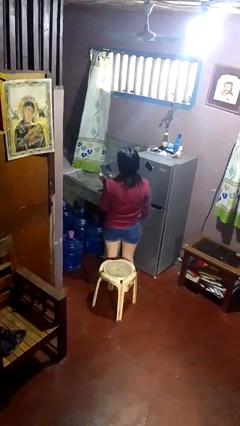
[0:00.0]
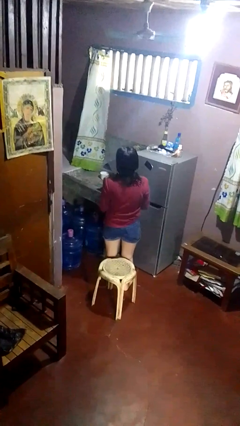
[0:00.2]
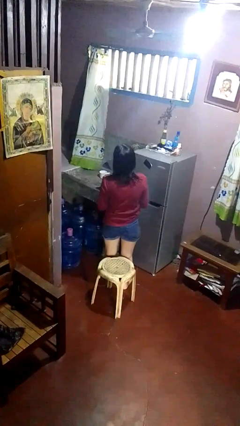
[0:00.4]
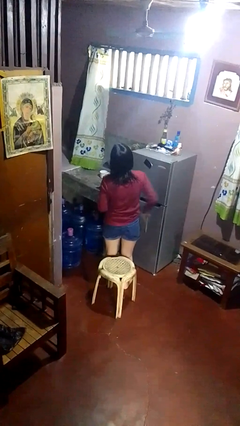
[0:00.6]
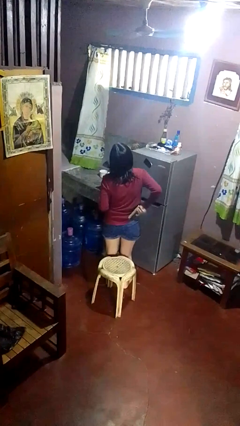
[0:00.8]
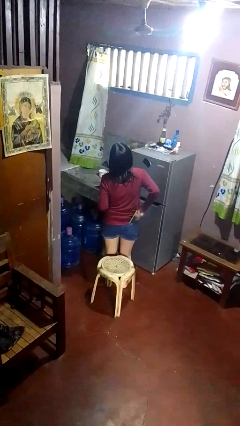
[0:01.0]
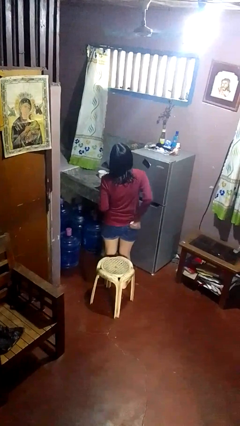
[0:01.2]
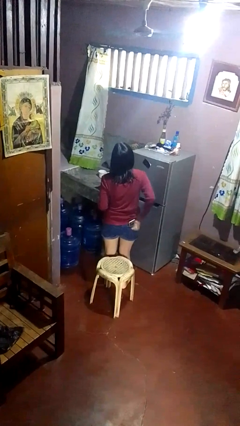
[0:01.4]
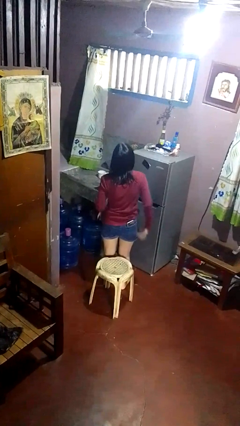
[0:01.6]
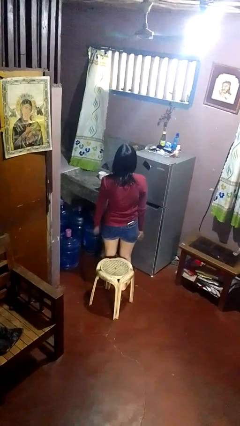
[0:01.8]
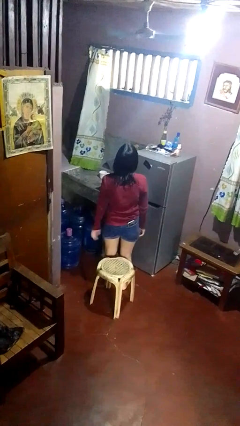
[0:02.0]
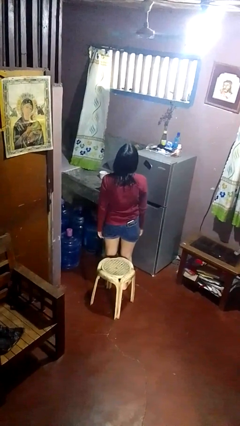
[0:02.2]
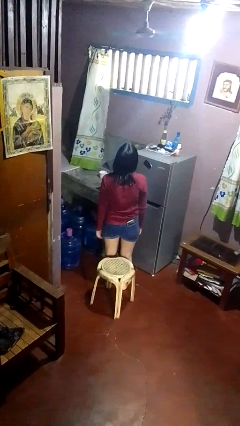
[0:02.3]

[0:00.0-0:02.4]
person puts phone into pocket

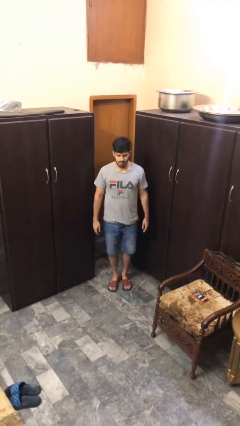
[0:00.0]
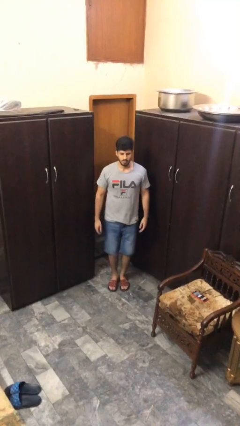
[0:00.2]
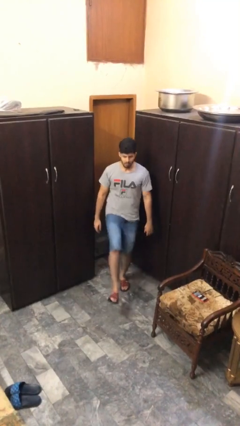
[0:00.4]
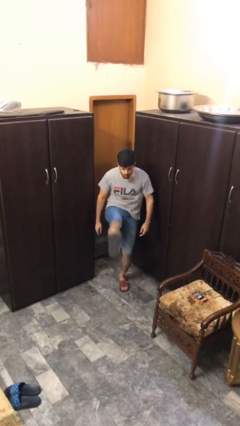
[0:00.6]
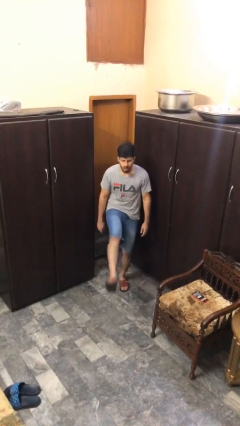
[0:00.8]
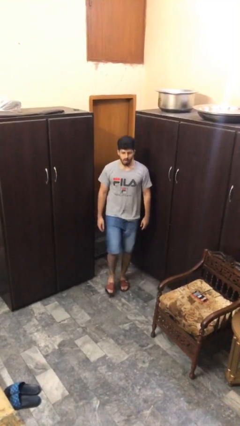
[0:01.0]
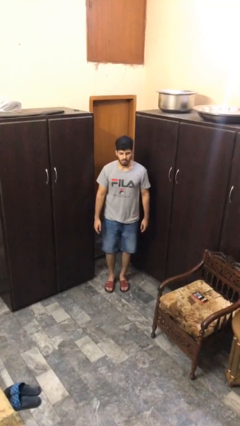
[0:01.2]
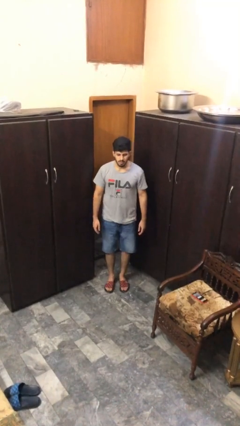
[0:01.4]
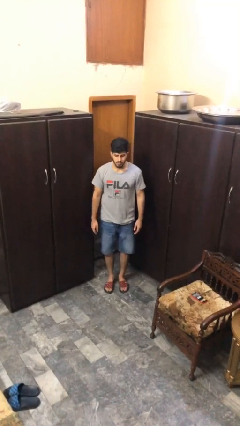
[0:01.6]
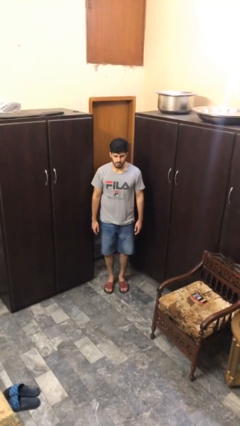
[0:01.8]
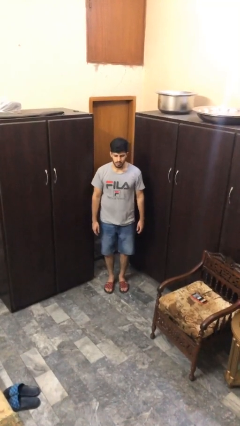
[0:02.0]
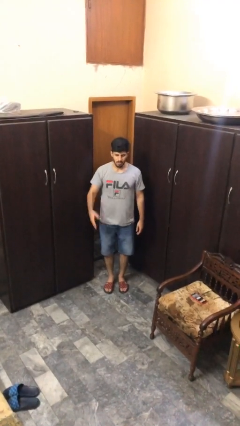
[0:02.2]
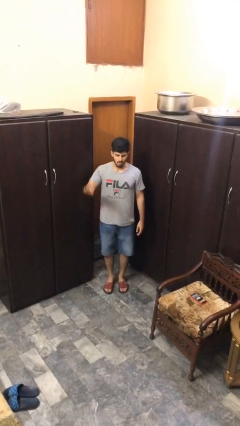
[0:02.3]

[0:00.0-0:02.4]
person karate kicks

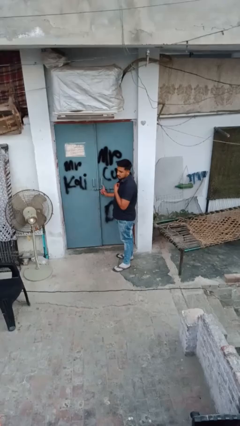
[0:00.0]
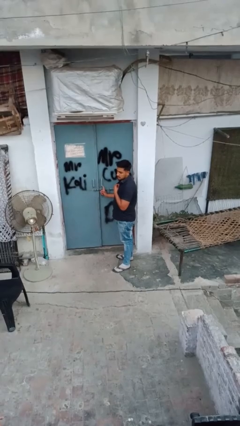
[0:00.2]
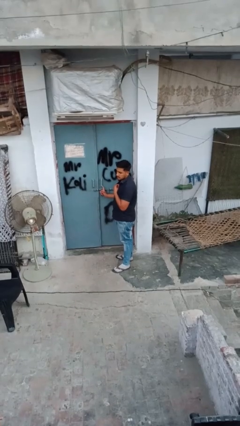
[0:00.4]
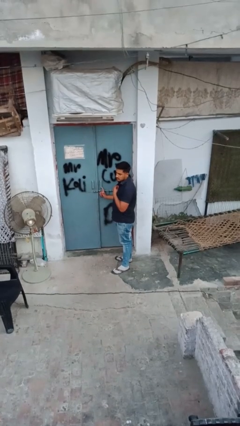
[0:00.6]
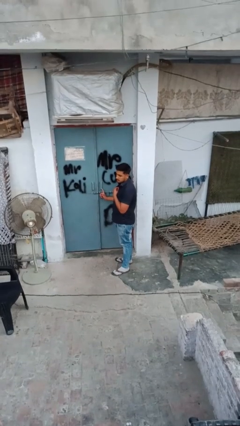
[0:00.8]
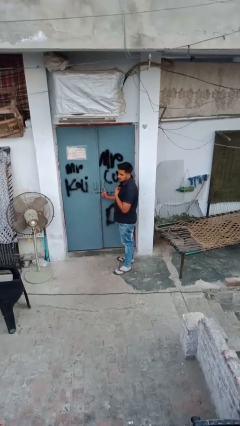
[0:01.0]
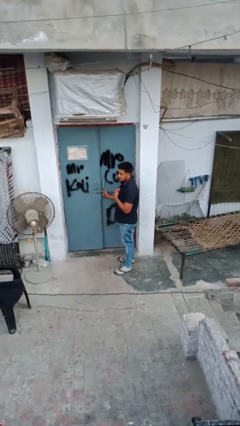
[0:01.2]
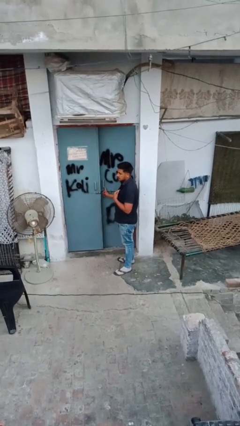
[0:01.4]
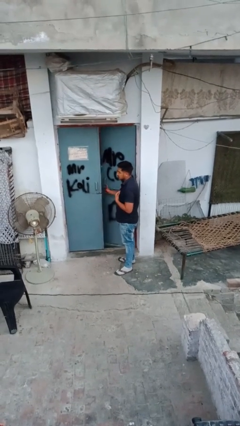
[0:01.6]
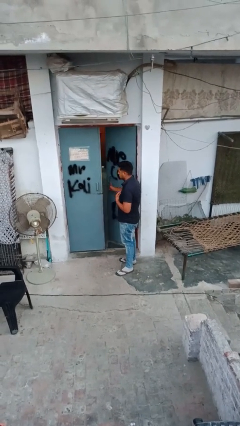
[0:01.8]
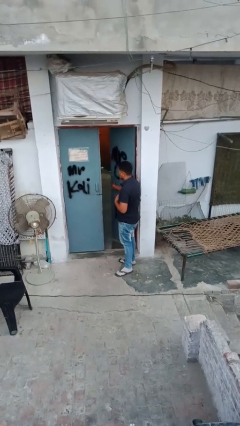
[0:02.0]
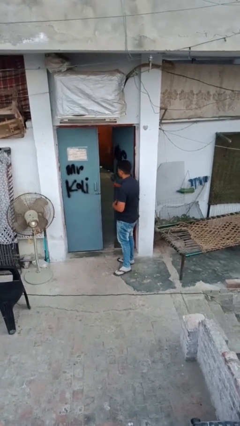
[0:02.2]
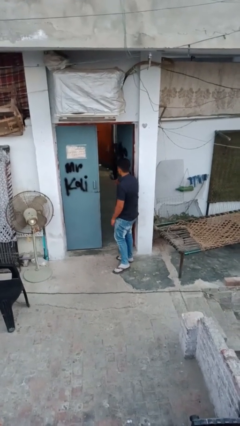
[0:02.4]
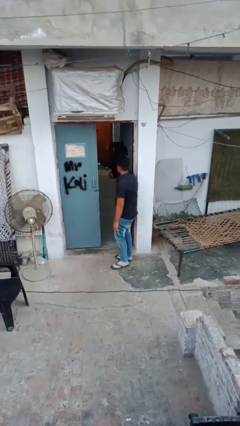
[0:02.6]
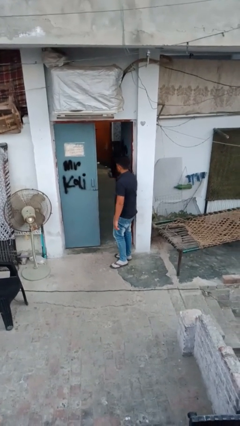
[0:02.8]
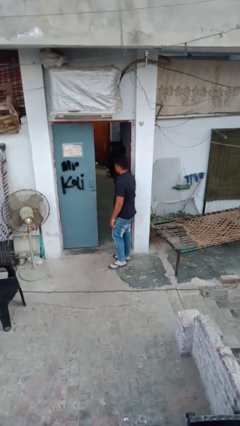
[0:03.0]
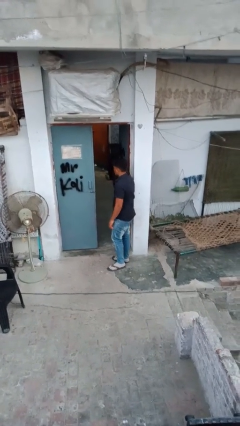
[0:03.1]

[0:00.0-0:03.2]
person opens facility door

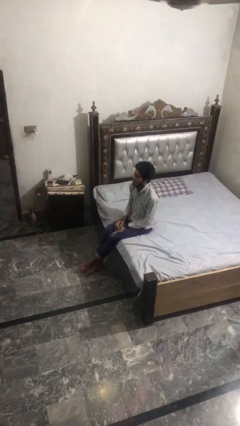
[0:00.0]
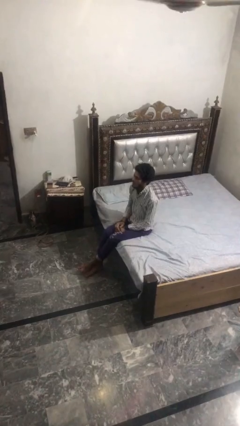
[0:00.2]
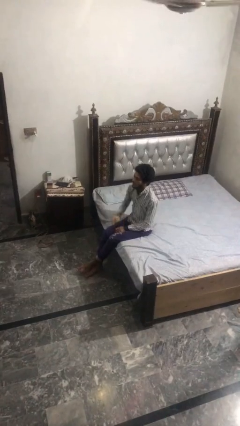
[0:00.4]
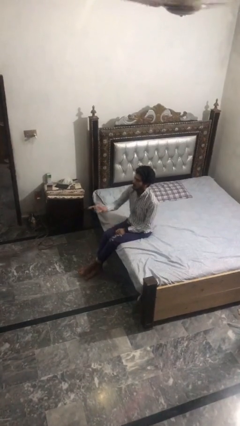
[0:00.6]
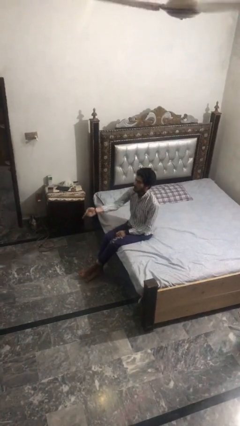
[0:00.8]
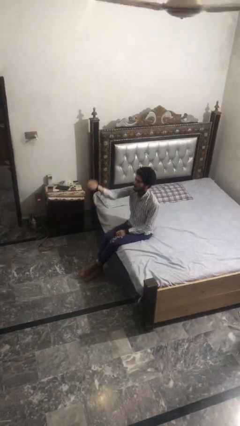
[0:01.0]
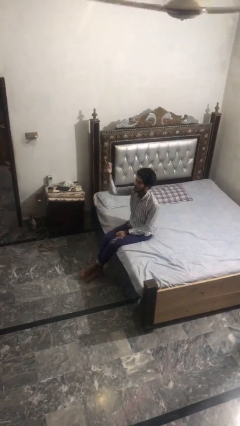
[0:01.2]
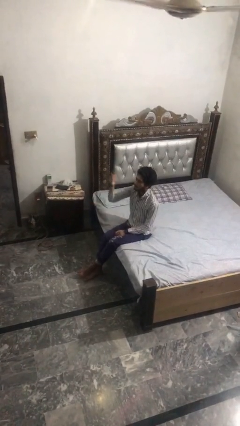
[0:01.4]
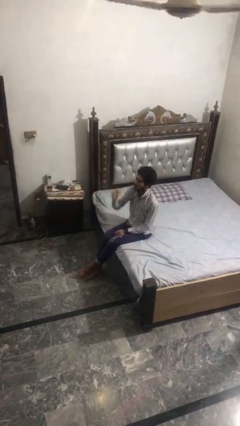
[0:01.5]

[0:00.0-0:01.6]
person gestures swipe up

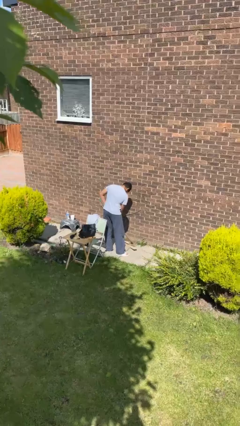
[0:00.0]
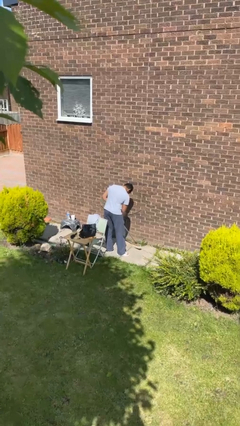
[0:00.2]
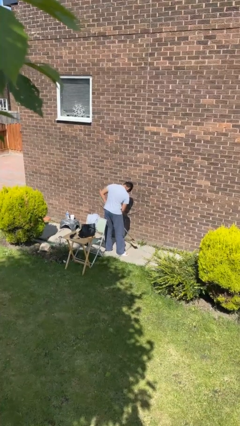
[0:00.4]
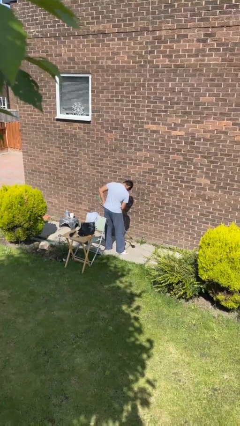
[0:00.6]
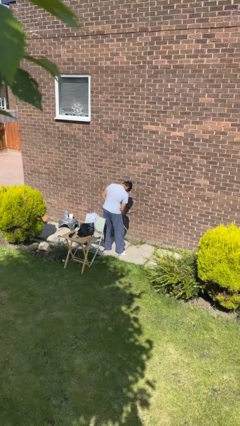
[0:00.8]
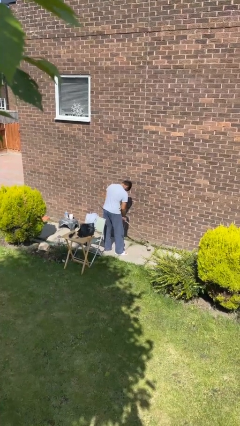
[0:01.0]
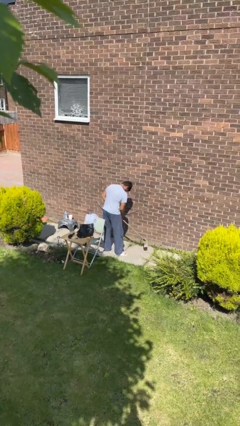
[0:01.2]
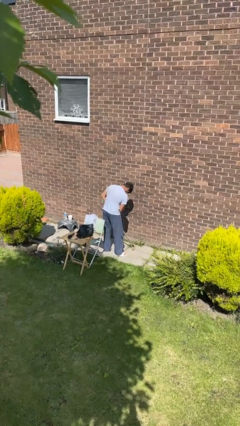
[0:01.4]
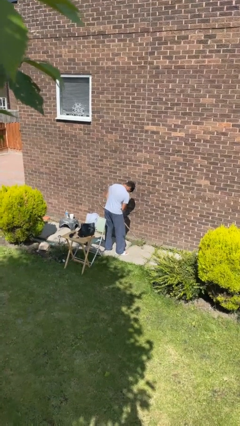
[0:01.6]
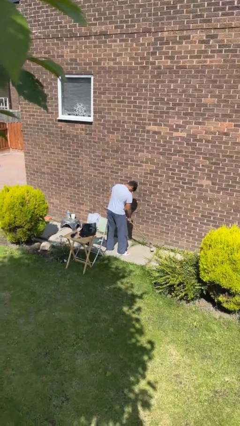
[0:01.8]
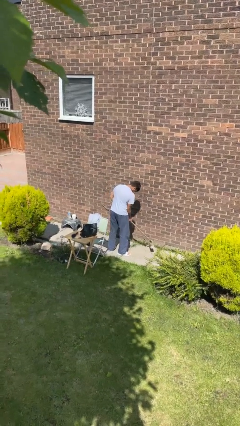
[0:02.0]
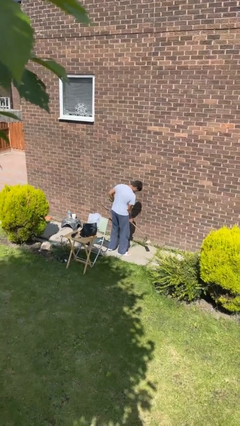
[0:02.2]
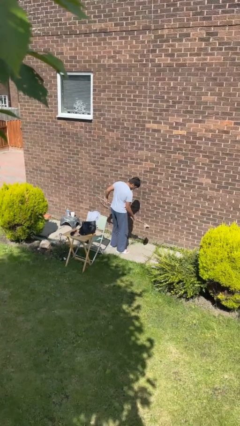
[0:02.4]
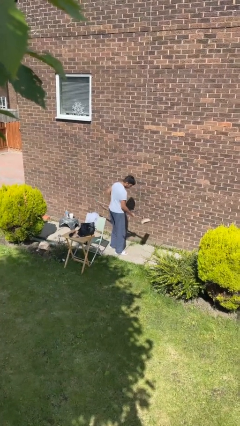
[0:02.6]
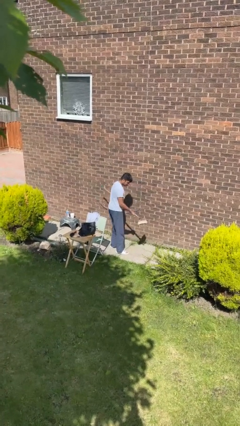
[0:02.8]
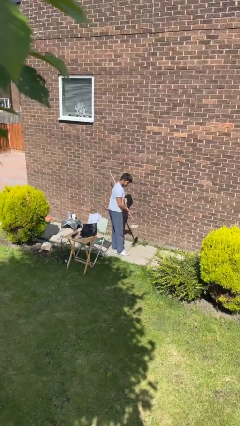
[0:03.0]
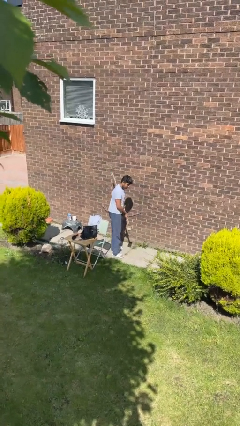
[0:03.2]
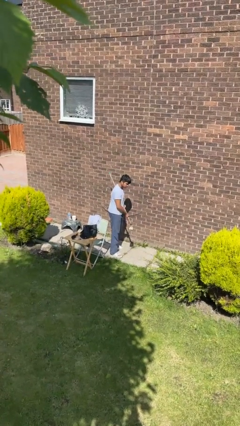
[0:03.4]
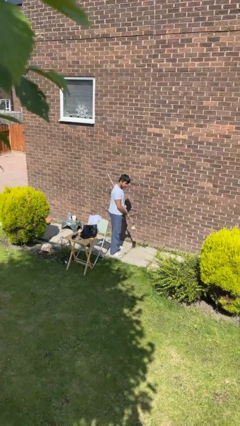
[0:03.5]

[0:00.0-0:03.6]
person sweeps floor

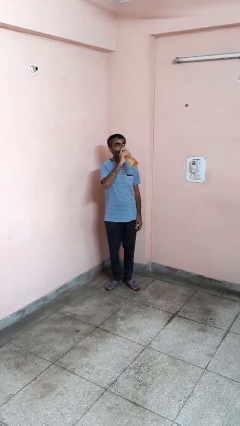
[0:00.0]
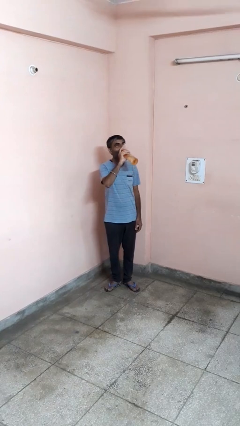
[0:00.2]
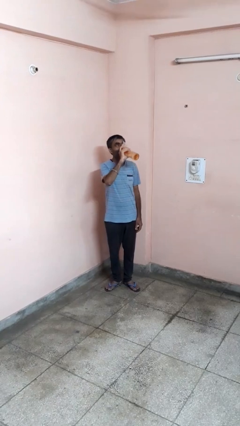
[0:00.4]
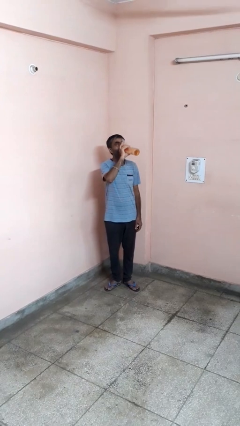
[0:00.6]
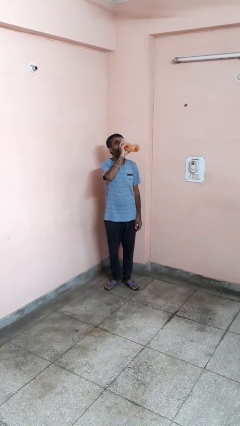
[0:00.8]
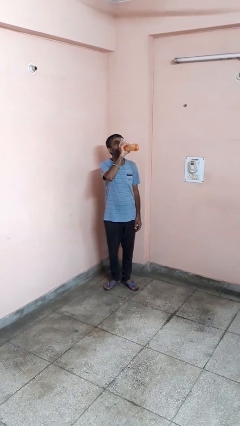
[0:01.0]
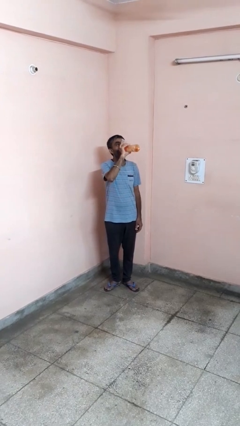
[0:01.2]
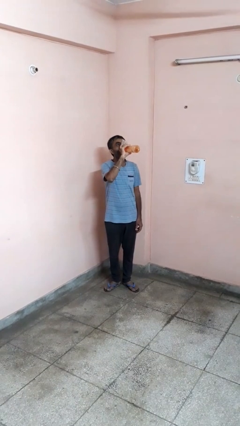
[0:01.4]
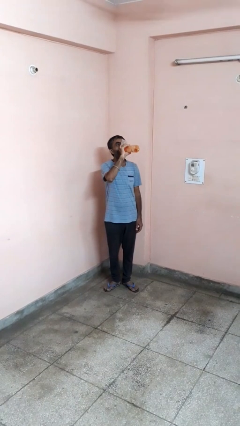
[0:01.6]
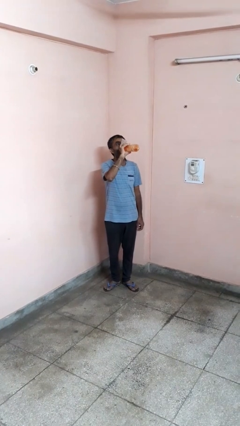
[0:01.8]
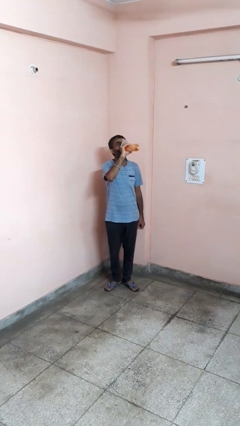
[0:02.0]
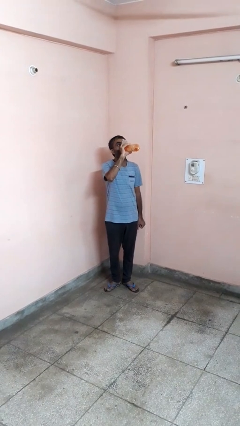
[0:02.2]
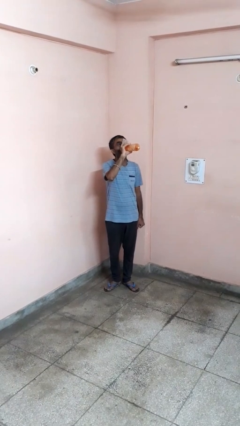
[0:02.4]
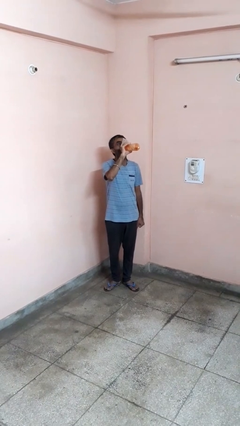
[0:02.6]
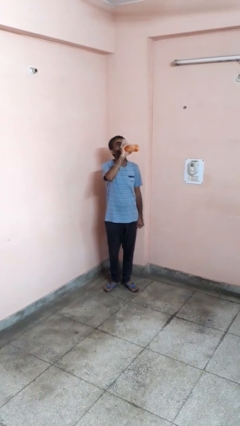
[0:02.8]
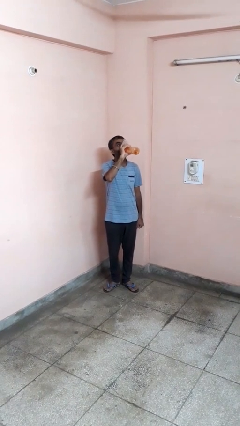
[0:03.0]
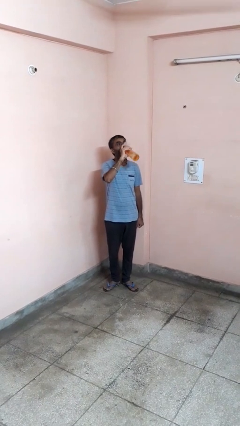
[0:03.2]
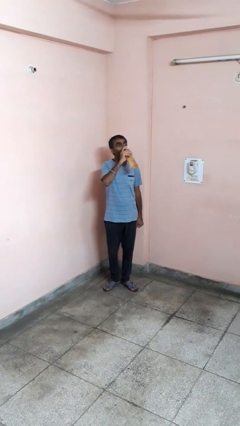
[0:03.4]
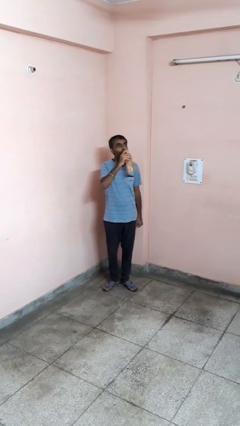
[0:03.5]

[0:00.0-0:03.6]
person drinks from bottle

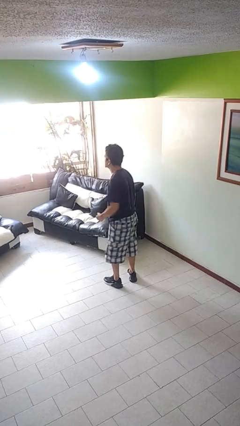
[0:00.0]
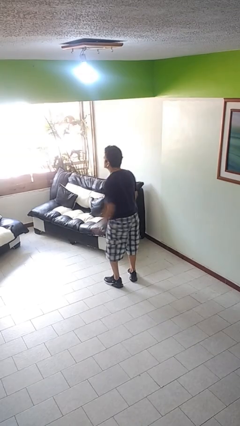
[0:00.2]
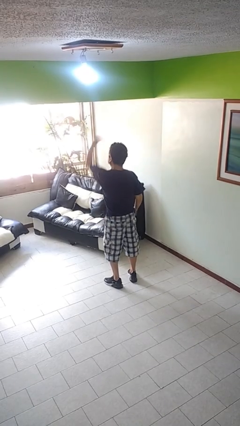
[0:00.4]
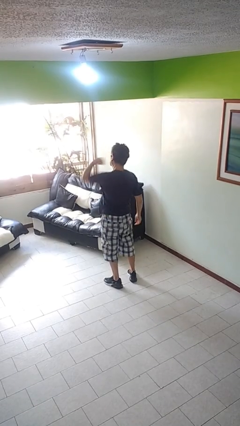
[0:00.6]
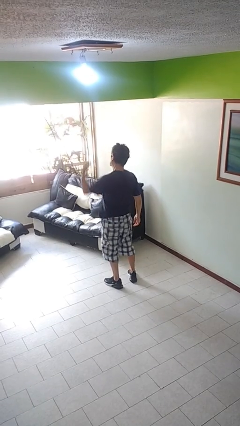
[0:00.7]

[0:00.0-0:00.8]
person punches
